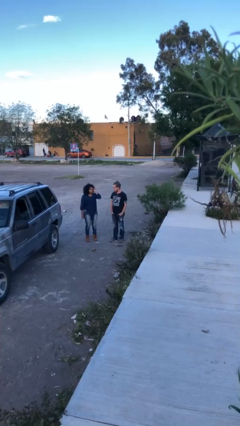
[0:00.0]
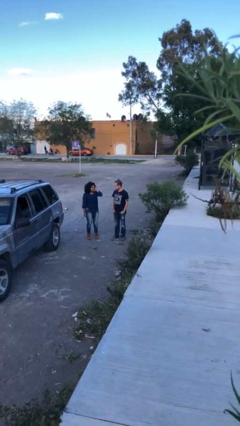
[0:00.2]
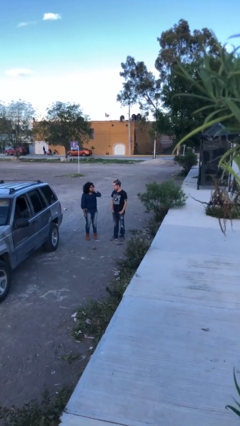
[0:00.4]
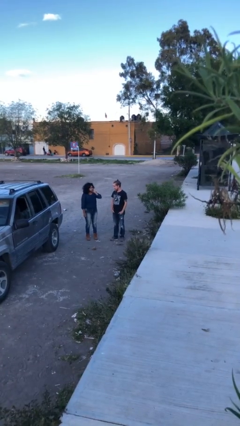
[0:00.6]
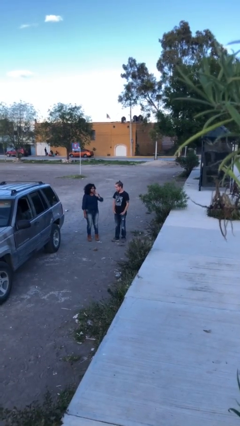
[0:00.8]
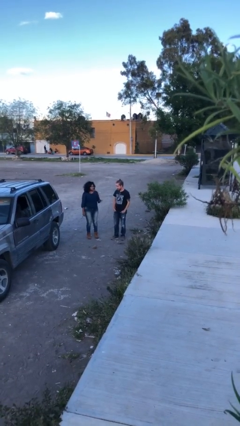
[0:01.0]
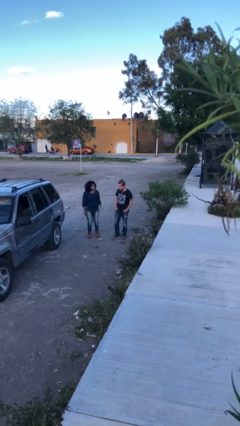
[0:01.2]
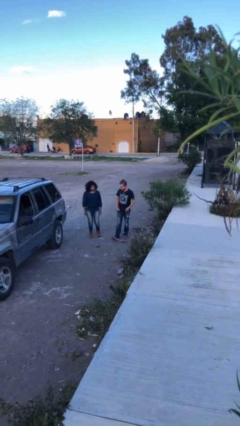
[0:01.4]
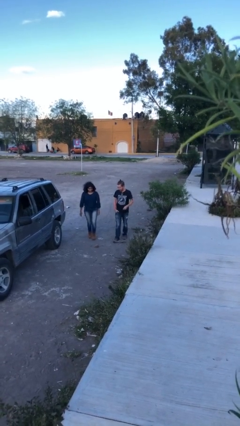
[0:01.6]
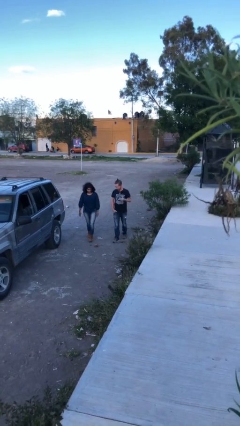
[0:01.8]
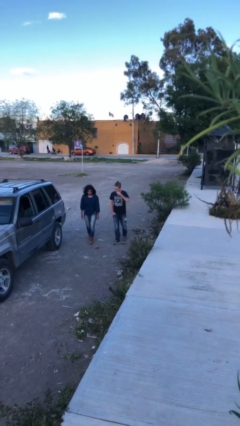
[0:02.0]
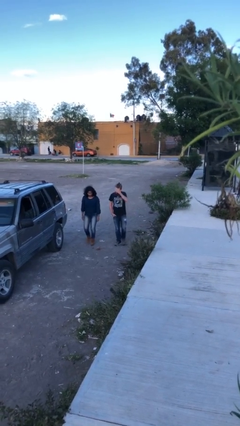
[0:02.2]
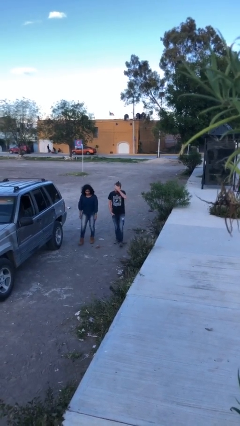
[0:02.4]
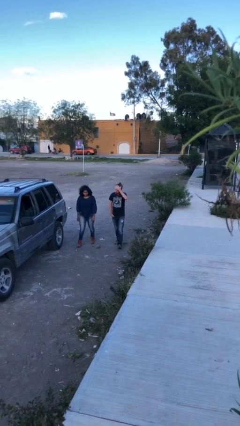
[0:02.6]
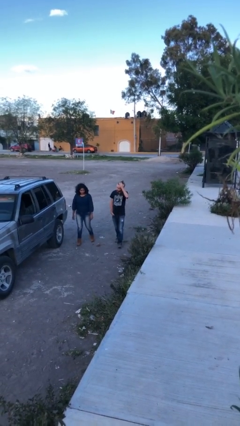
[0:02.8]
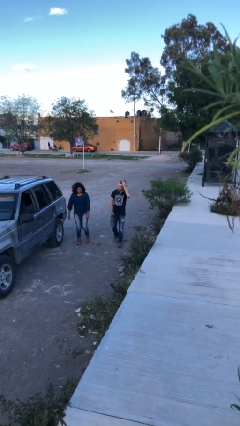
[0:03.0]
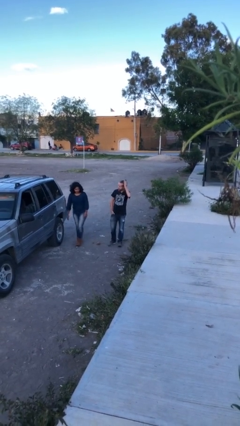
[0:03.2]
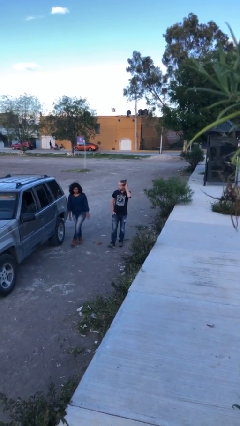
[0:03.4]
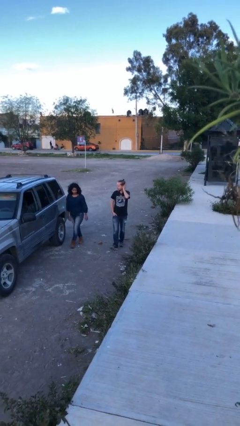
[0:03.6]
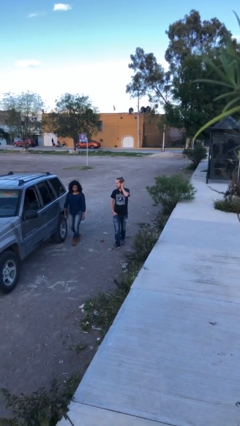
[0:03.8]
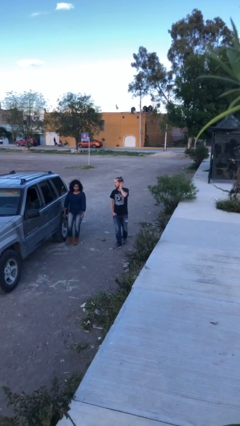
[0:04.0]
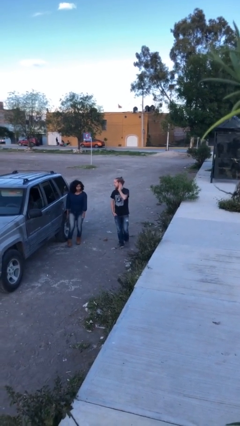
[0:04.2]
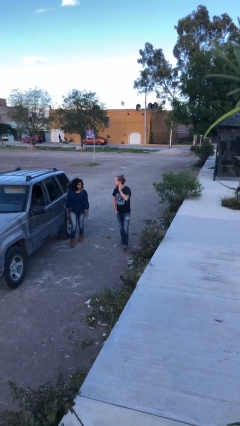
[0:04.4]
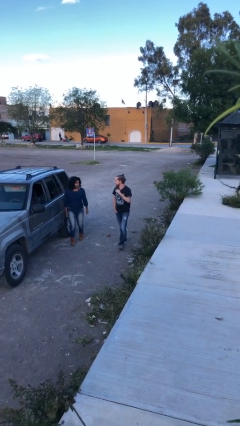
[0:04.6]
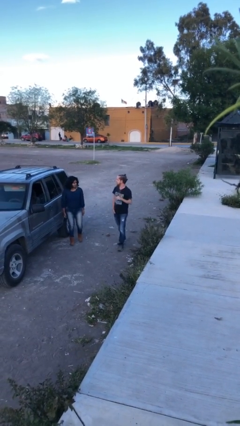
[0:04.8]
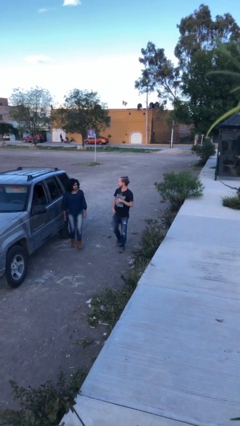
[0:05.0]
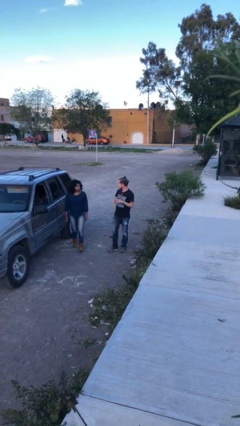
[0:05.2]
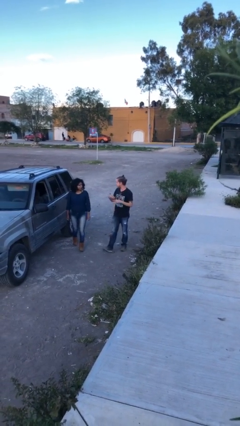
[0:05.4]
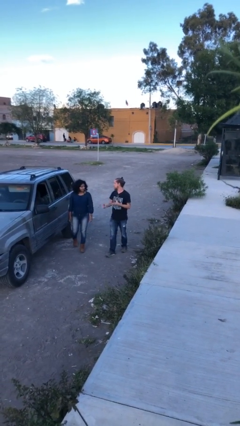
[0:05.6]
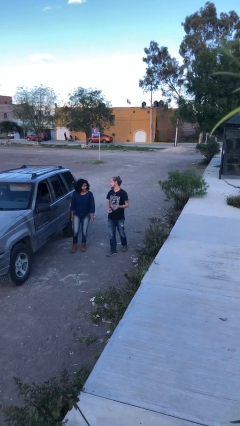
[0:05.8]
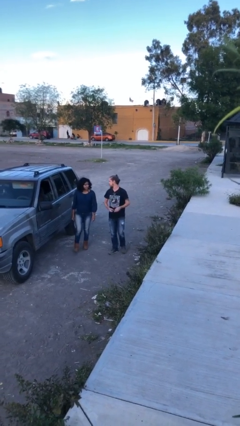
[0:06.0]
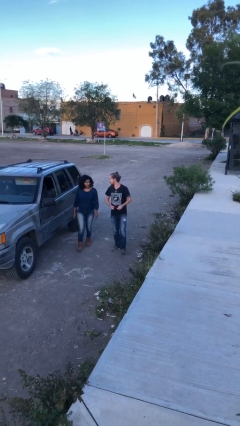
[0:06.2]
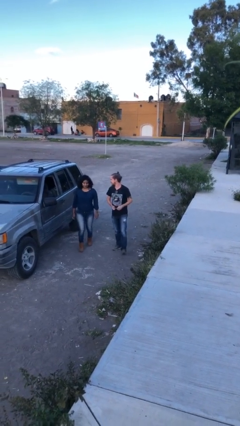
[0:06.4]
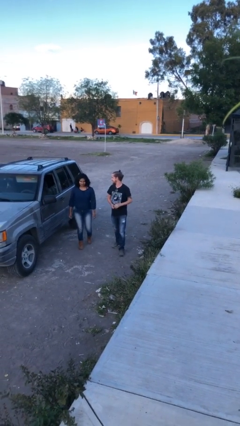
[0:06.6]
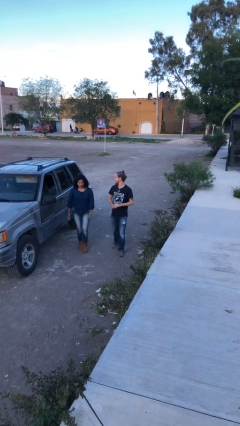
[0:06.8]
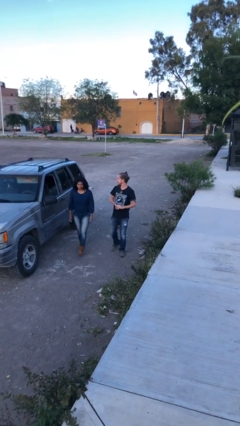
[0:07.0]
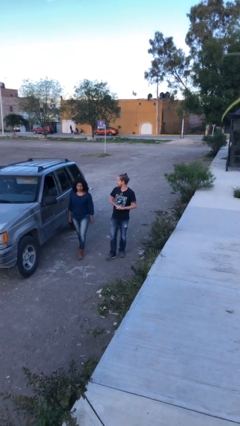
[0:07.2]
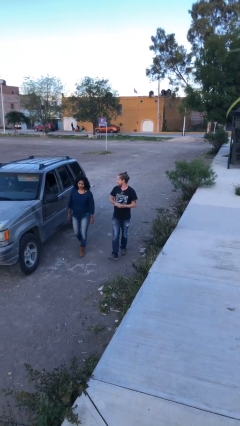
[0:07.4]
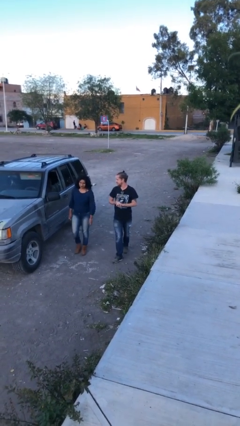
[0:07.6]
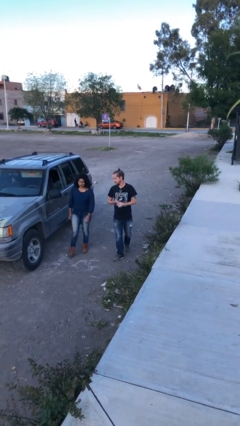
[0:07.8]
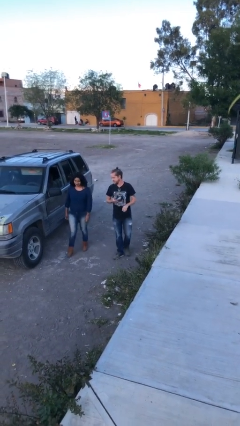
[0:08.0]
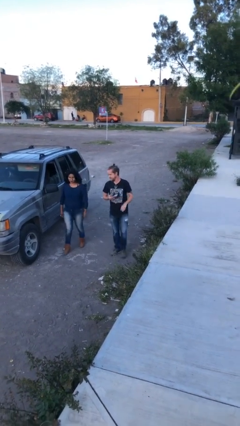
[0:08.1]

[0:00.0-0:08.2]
person talks to person

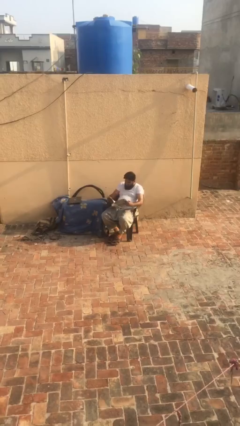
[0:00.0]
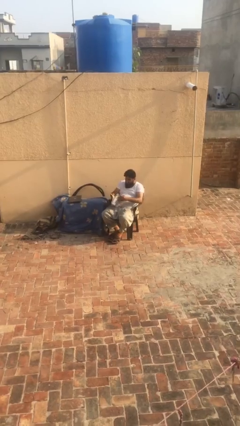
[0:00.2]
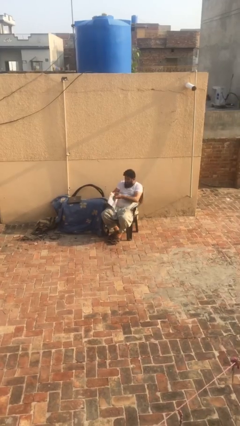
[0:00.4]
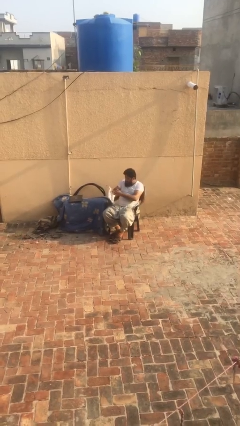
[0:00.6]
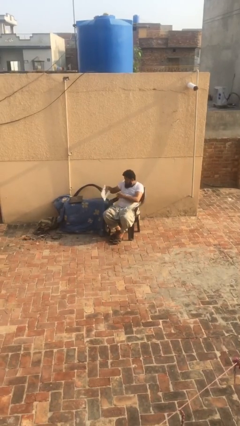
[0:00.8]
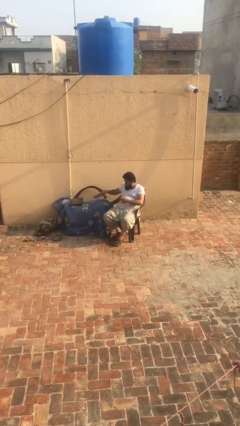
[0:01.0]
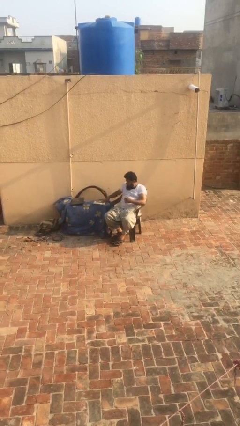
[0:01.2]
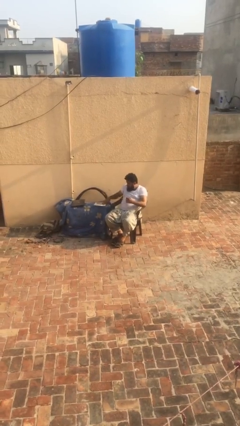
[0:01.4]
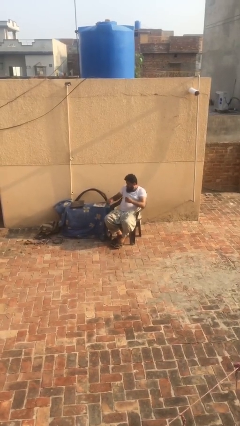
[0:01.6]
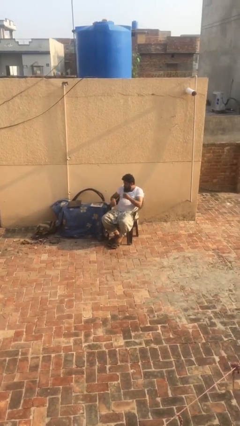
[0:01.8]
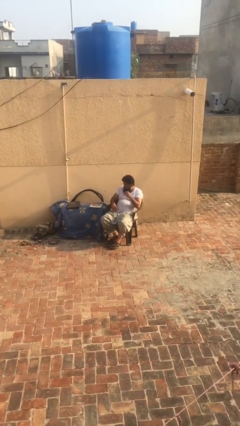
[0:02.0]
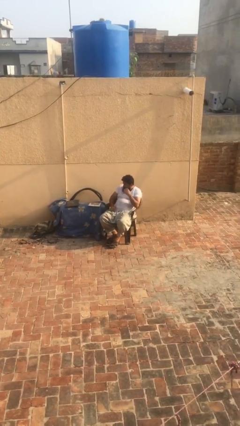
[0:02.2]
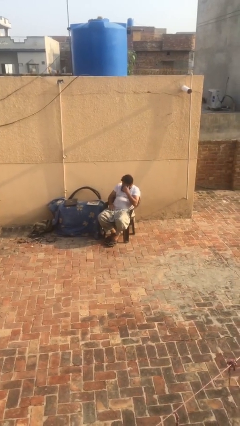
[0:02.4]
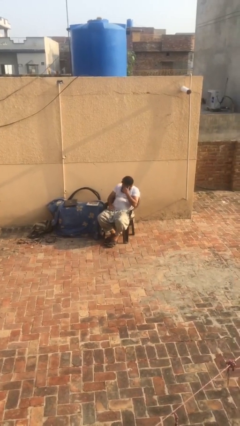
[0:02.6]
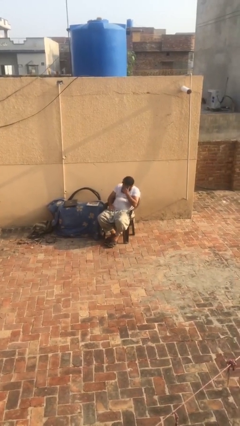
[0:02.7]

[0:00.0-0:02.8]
person puts down object on table

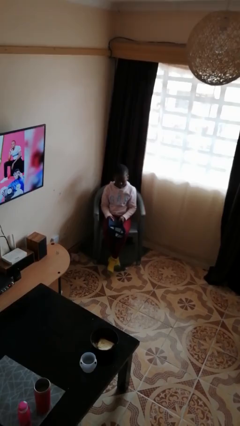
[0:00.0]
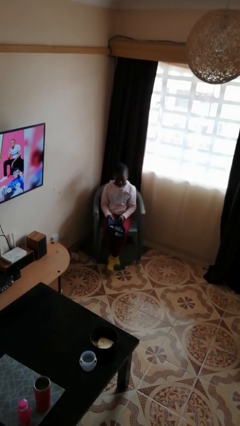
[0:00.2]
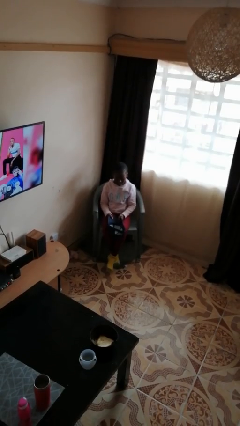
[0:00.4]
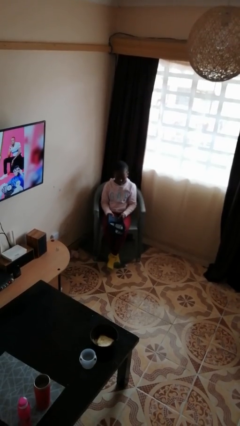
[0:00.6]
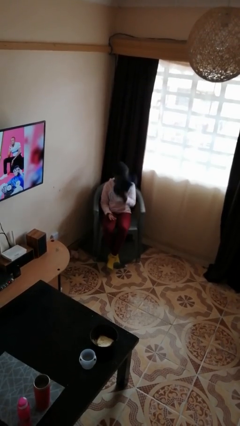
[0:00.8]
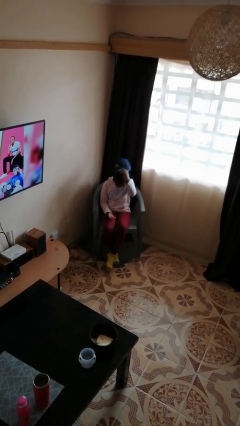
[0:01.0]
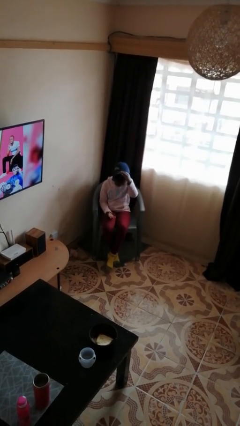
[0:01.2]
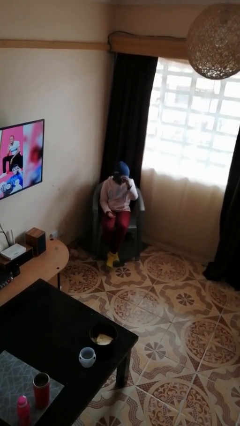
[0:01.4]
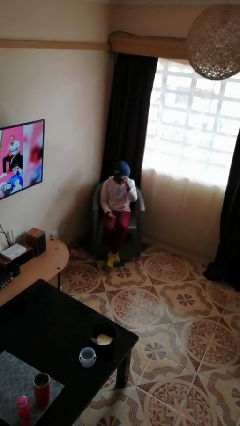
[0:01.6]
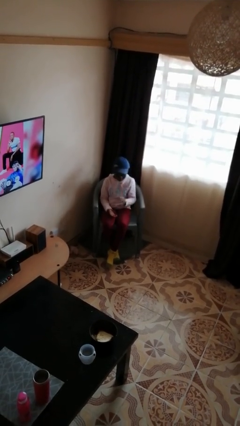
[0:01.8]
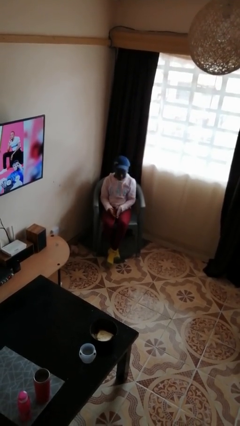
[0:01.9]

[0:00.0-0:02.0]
person puts on hat

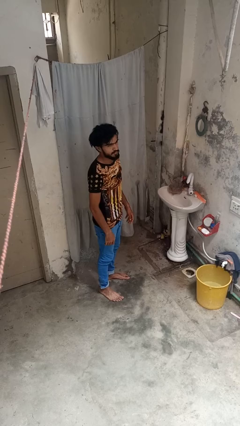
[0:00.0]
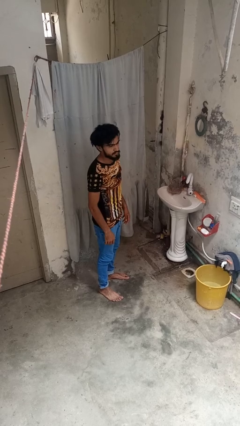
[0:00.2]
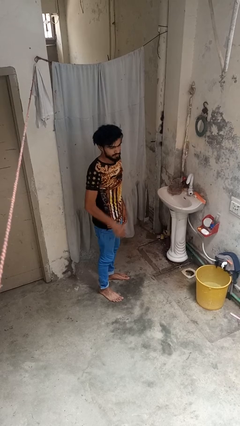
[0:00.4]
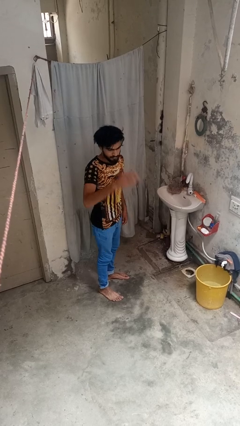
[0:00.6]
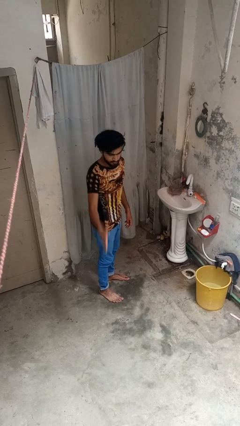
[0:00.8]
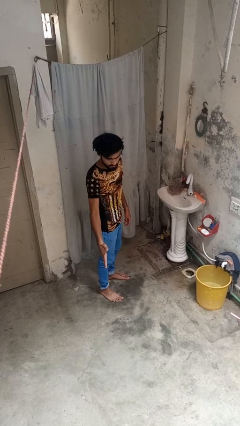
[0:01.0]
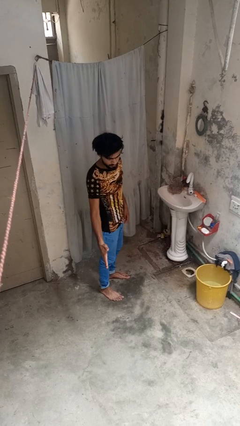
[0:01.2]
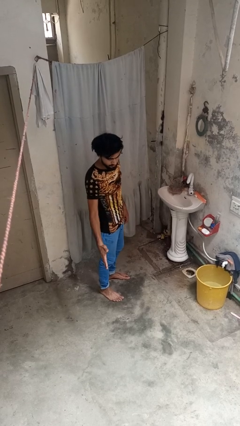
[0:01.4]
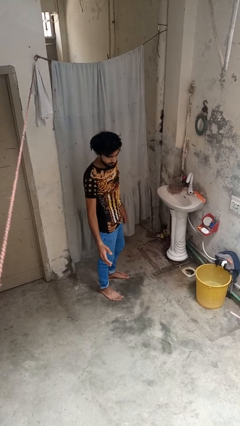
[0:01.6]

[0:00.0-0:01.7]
person karate chop

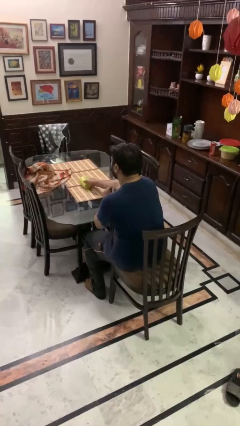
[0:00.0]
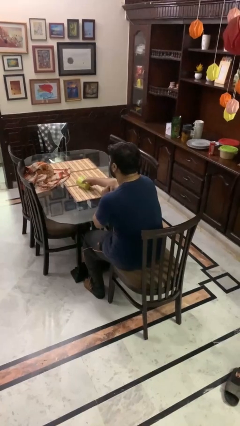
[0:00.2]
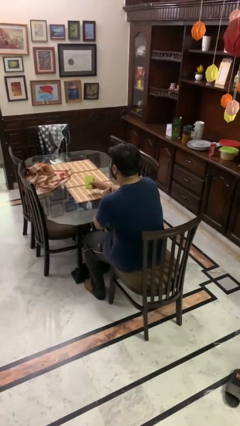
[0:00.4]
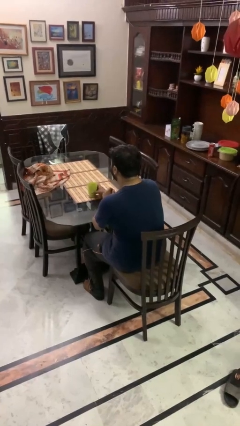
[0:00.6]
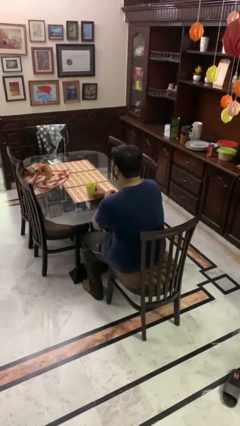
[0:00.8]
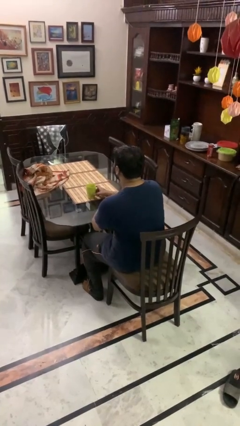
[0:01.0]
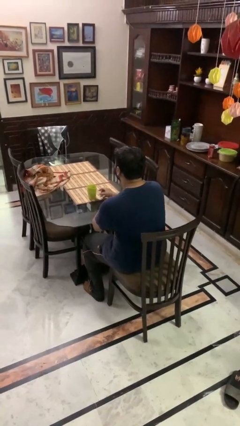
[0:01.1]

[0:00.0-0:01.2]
person sets upright glass

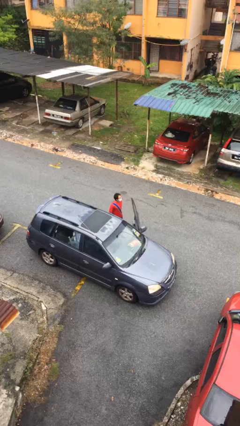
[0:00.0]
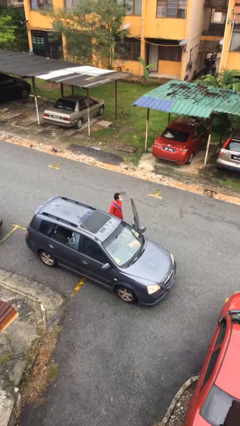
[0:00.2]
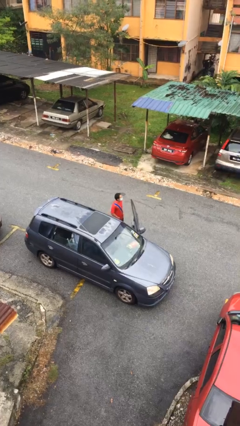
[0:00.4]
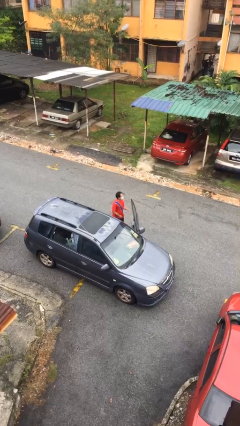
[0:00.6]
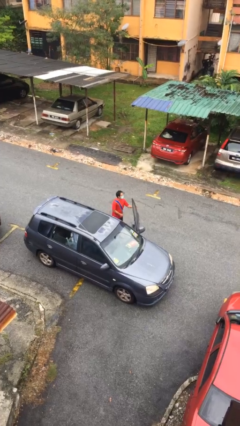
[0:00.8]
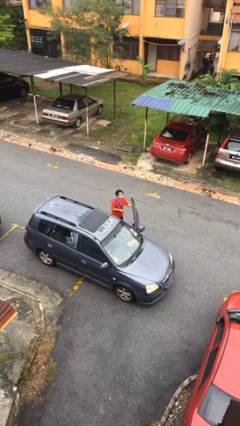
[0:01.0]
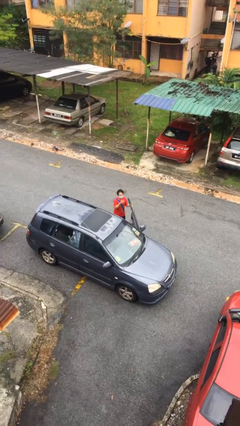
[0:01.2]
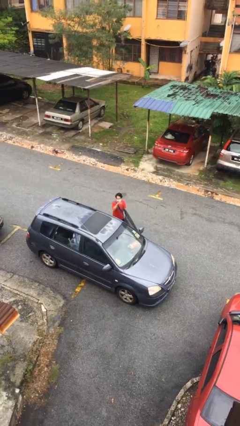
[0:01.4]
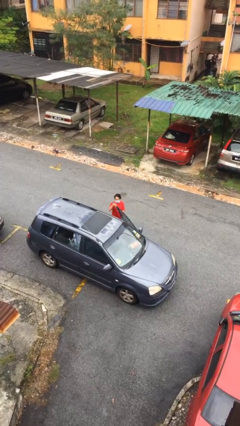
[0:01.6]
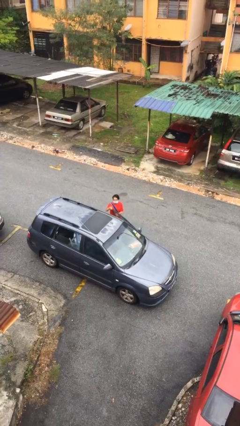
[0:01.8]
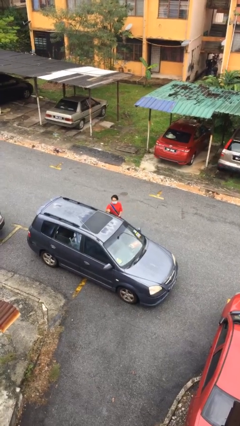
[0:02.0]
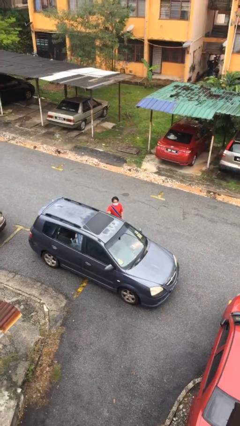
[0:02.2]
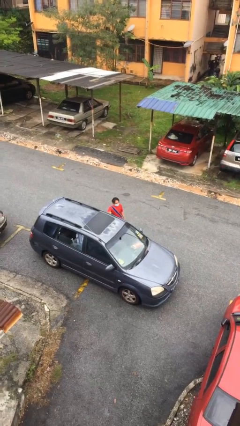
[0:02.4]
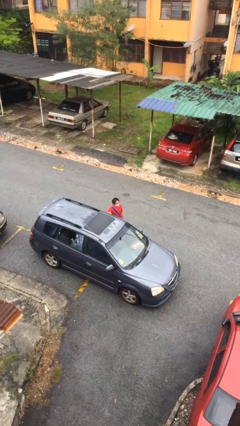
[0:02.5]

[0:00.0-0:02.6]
person closes car door
